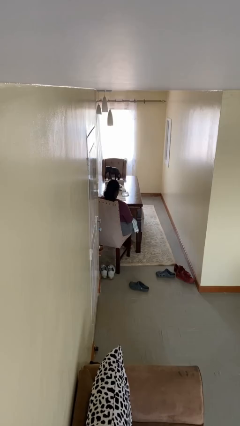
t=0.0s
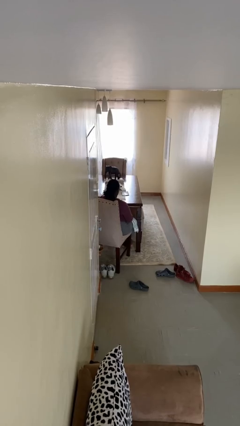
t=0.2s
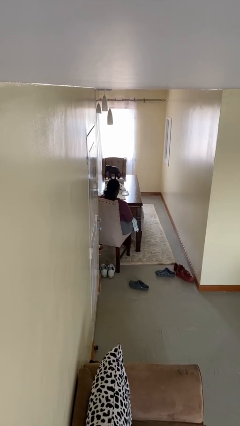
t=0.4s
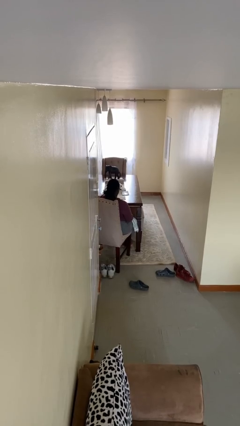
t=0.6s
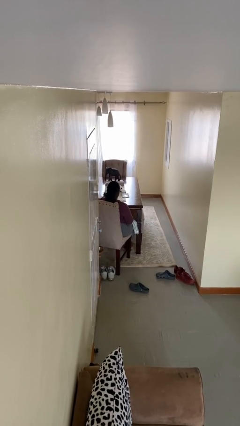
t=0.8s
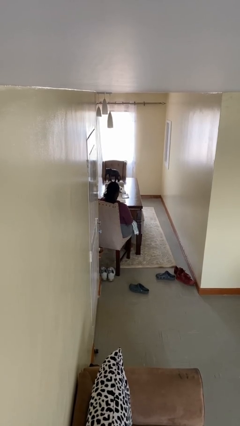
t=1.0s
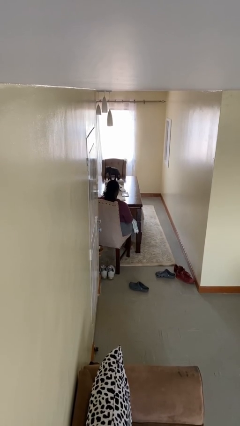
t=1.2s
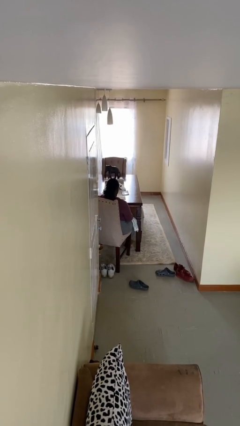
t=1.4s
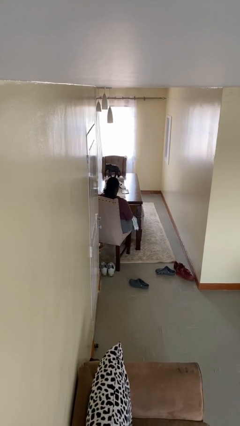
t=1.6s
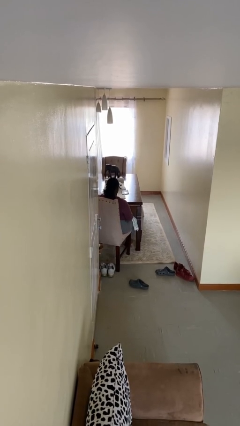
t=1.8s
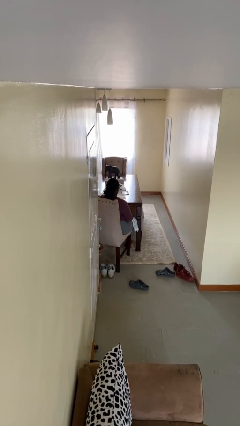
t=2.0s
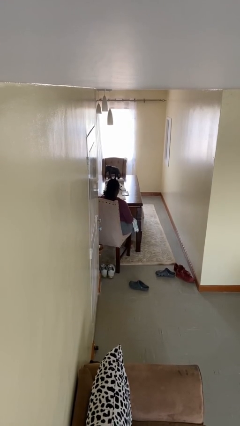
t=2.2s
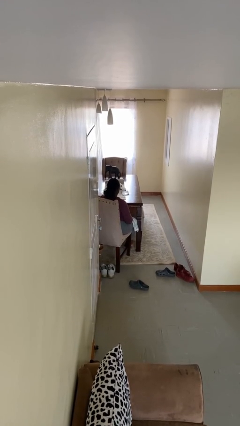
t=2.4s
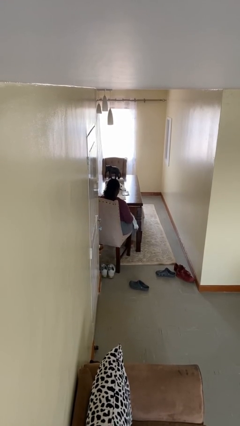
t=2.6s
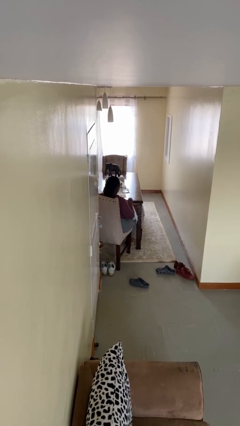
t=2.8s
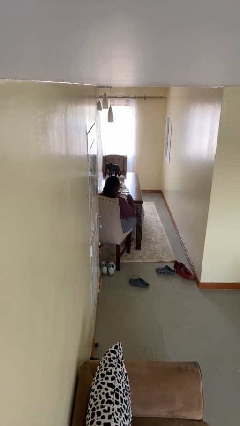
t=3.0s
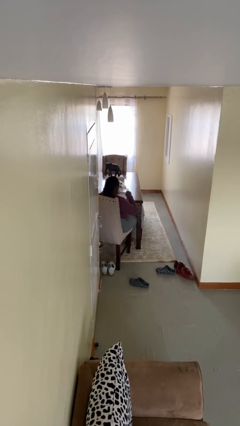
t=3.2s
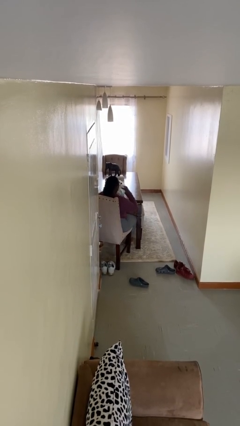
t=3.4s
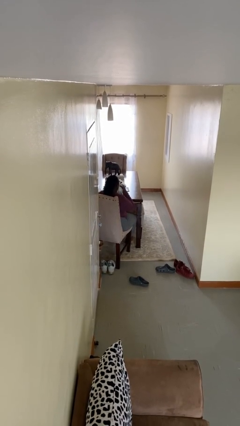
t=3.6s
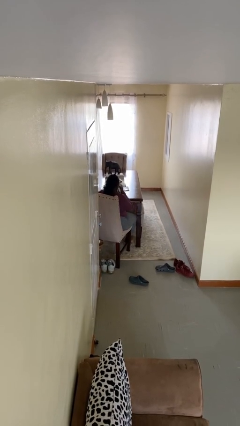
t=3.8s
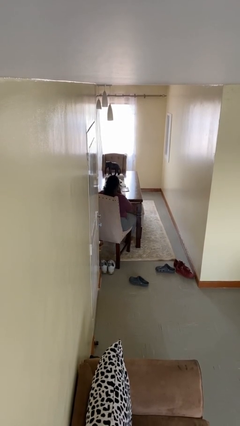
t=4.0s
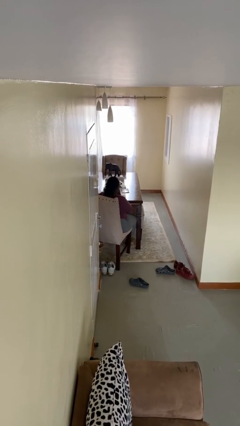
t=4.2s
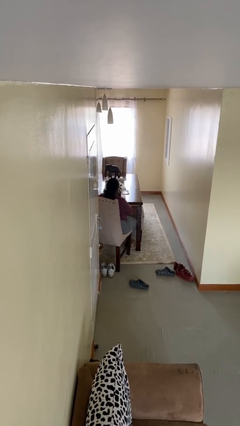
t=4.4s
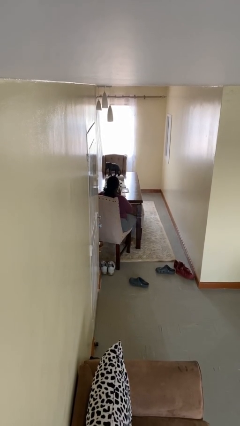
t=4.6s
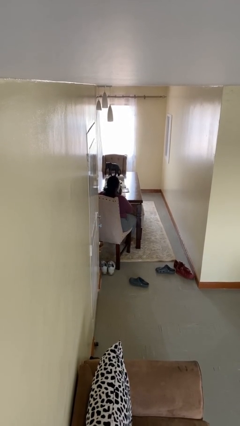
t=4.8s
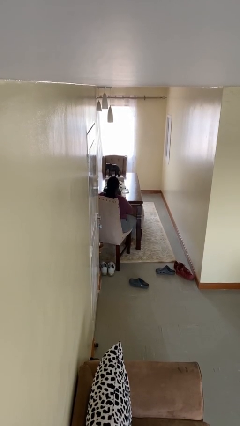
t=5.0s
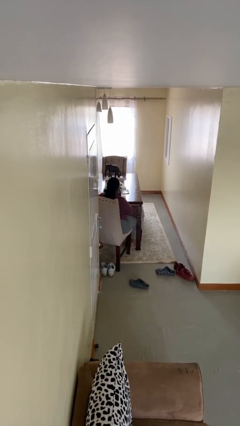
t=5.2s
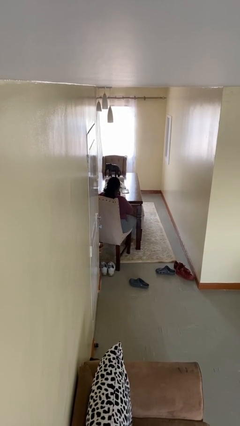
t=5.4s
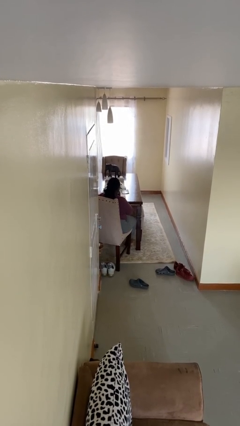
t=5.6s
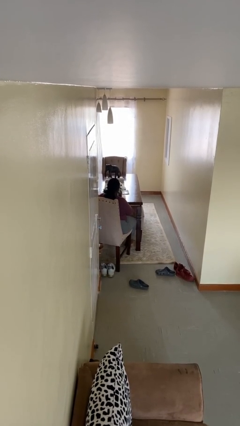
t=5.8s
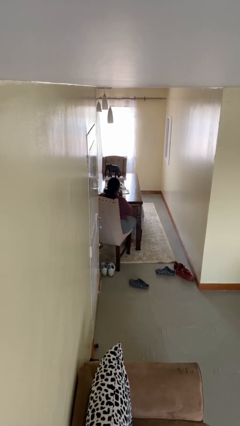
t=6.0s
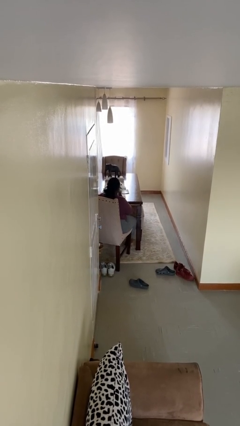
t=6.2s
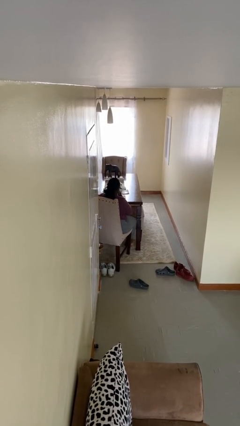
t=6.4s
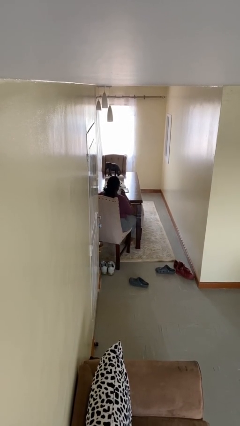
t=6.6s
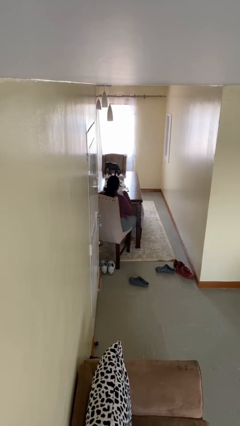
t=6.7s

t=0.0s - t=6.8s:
person wipes mouth with napkin

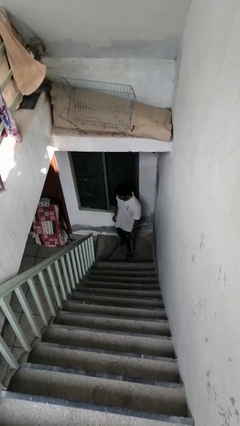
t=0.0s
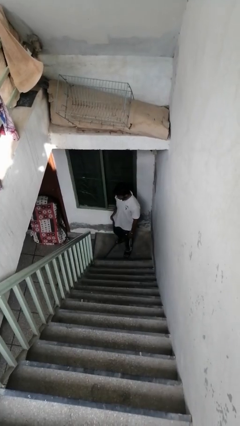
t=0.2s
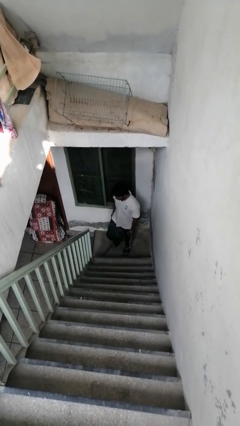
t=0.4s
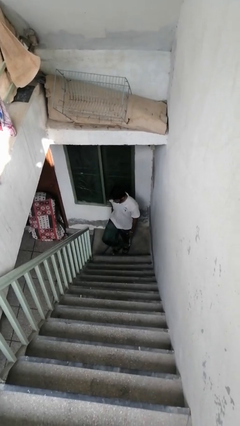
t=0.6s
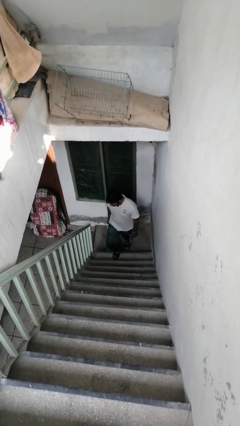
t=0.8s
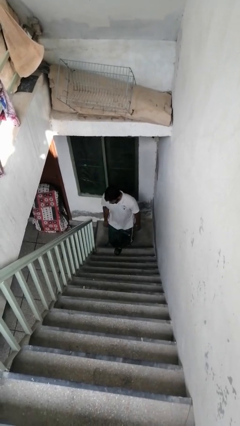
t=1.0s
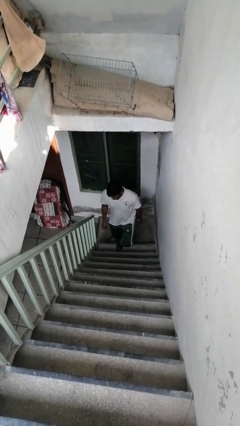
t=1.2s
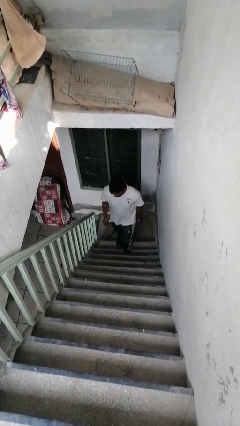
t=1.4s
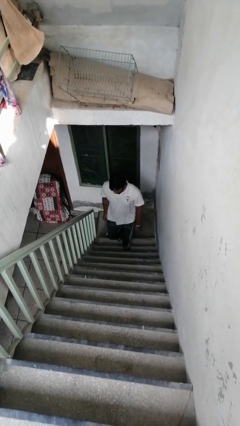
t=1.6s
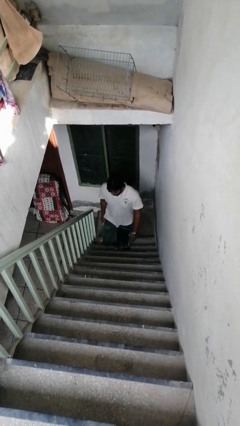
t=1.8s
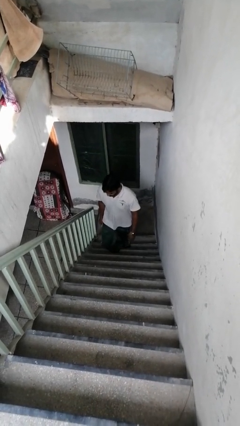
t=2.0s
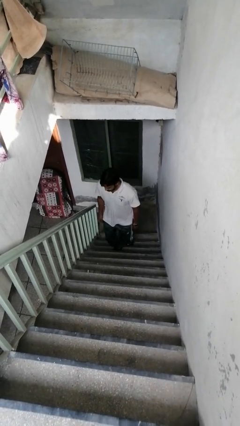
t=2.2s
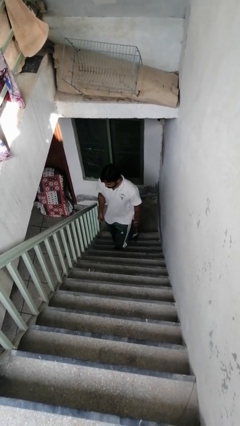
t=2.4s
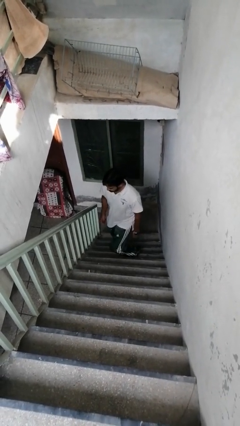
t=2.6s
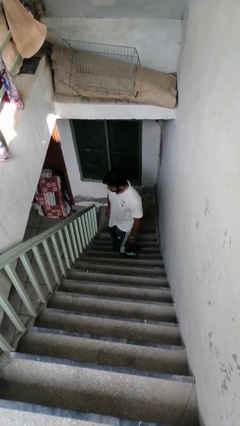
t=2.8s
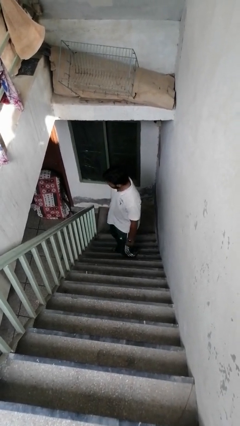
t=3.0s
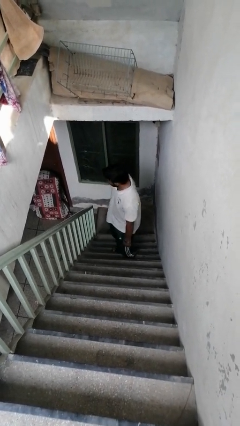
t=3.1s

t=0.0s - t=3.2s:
person climbs up stairs

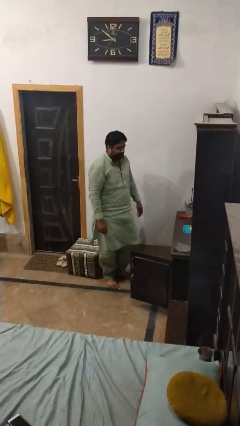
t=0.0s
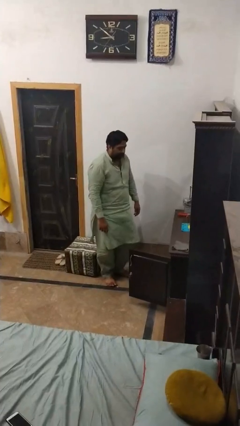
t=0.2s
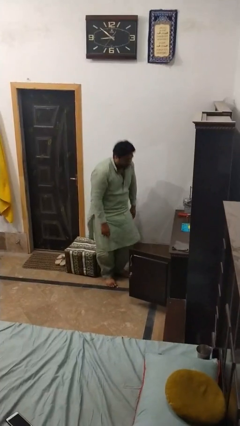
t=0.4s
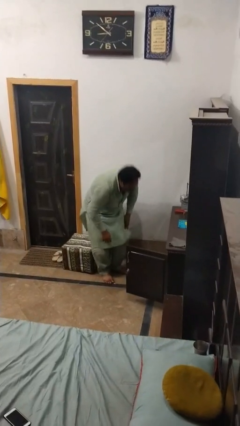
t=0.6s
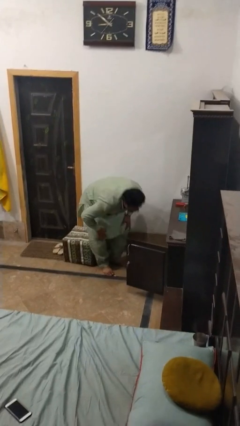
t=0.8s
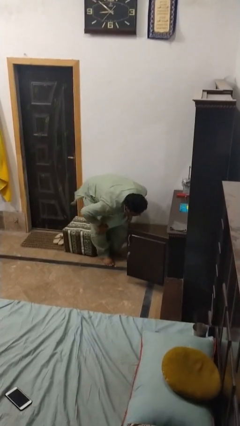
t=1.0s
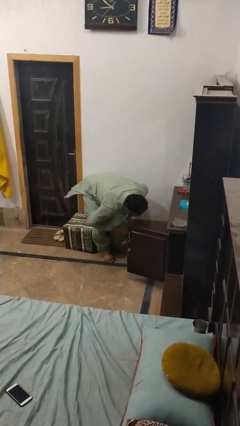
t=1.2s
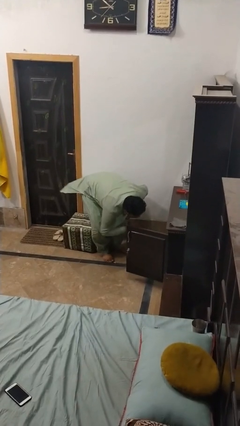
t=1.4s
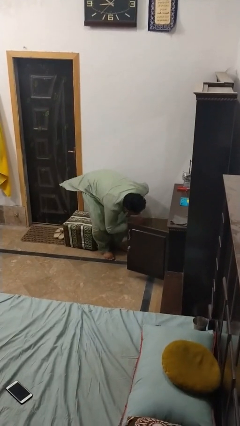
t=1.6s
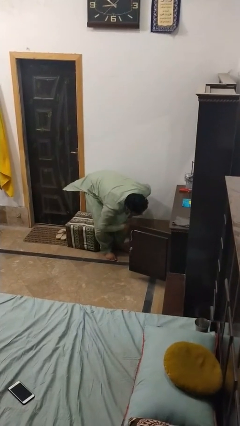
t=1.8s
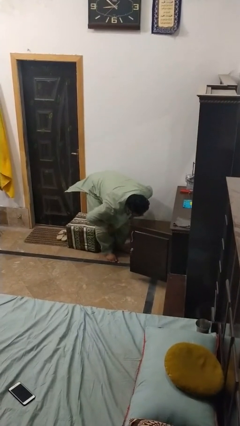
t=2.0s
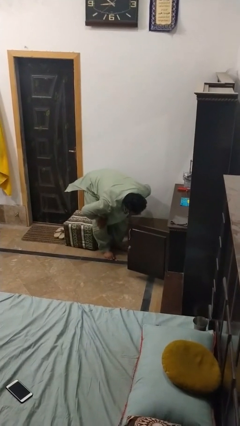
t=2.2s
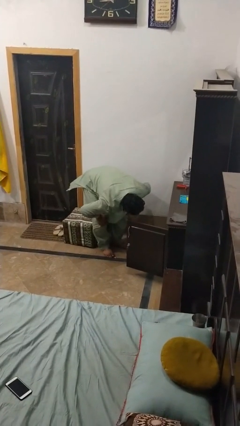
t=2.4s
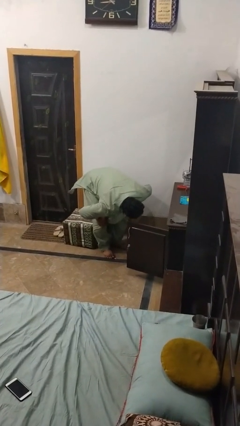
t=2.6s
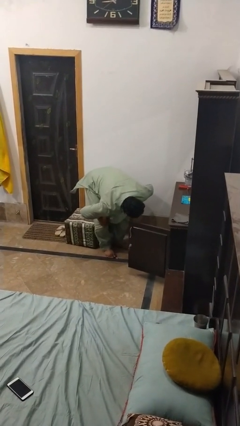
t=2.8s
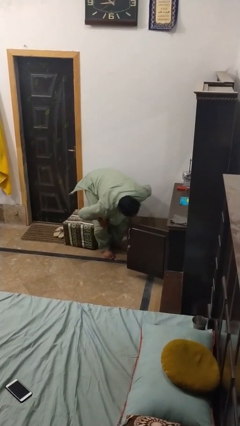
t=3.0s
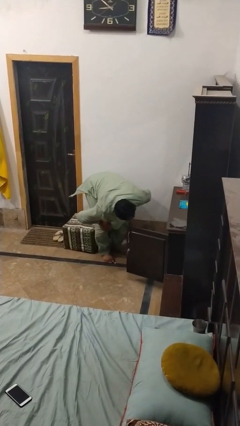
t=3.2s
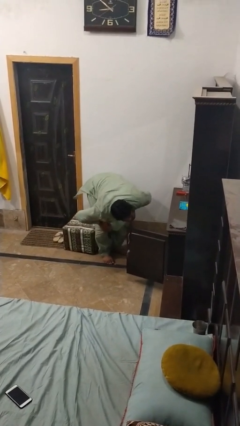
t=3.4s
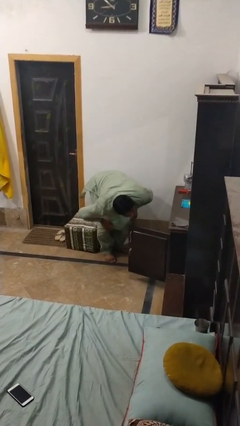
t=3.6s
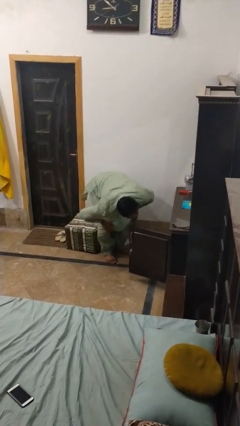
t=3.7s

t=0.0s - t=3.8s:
person searches in cabinet

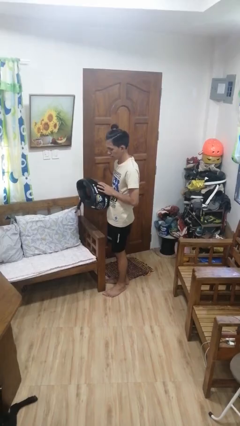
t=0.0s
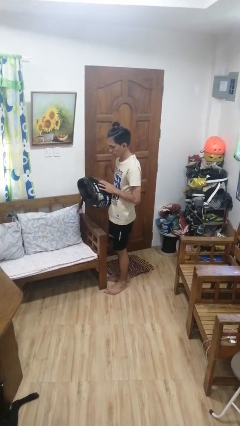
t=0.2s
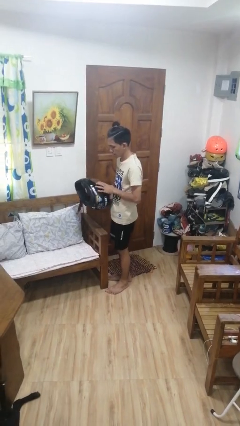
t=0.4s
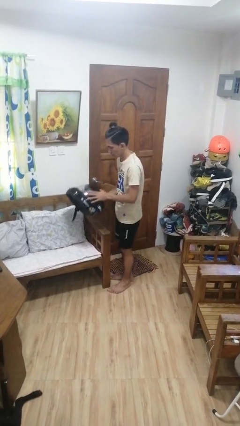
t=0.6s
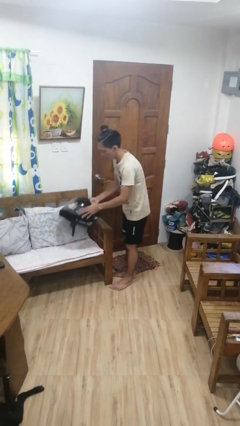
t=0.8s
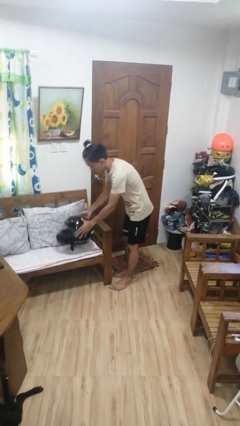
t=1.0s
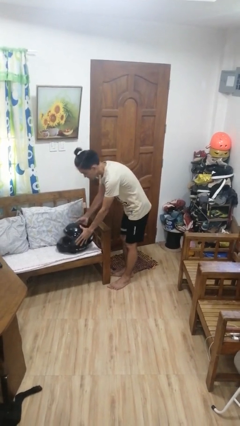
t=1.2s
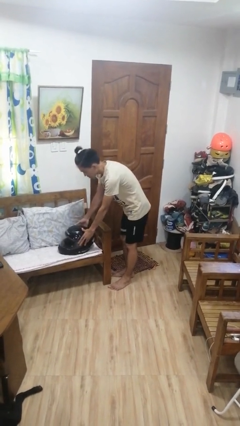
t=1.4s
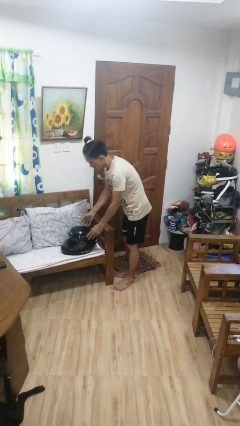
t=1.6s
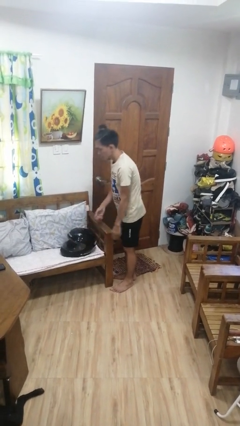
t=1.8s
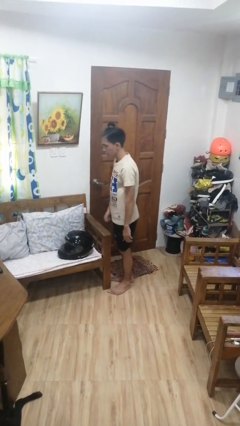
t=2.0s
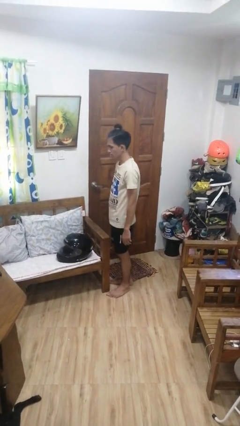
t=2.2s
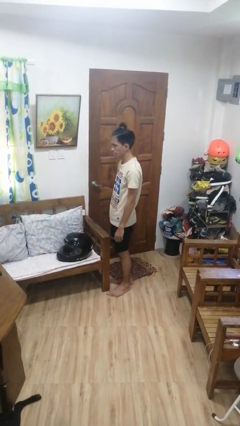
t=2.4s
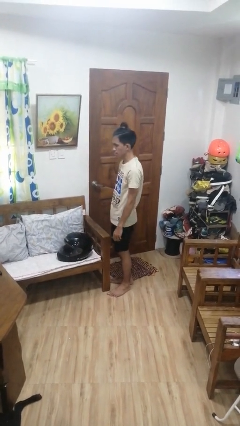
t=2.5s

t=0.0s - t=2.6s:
person puts down object on couch

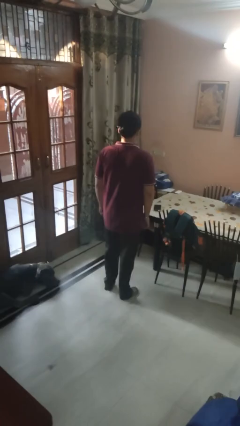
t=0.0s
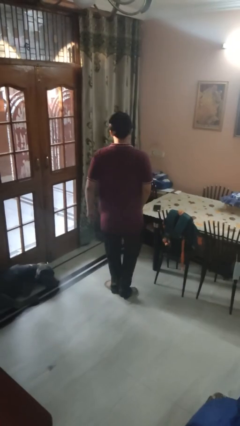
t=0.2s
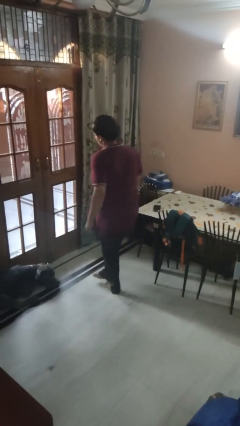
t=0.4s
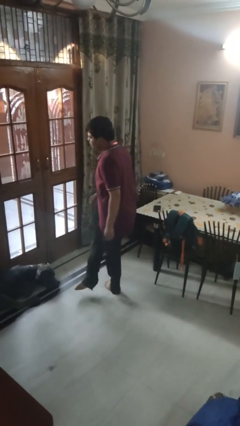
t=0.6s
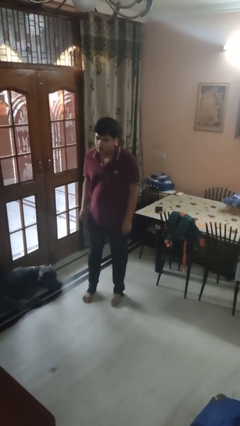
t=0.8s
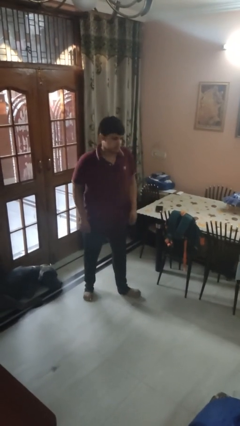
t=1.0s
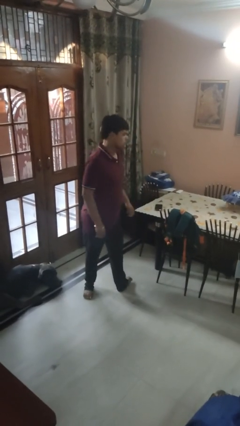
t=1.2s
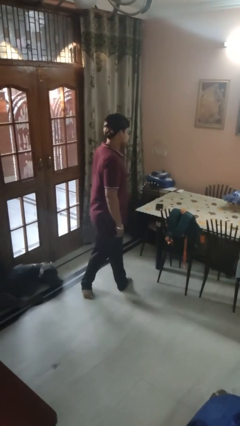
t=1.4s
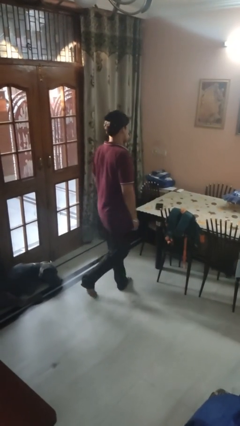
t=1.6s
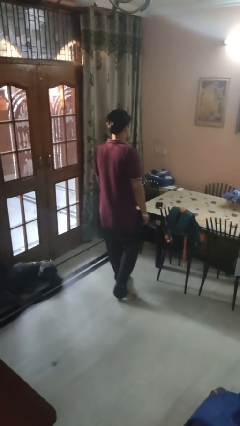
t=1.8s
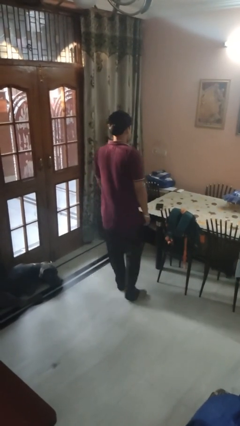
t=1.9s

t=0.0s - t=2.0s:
person twirls
